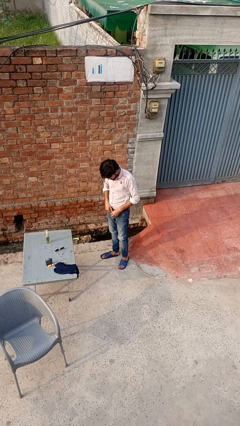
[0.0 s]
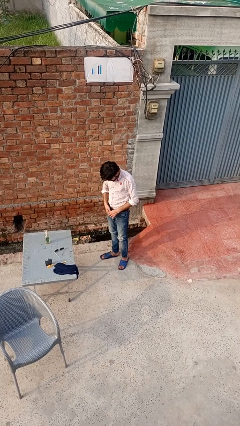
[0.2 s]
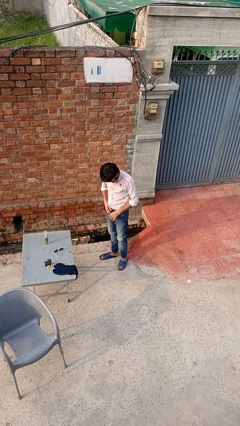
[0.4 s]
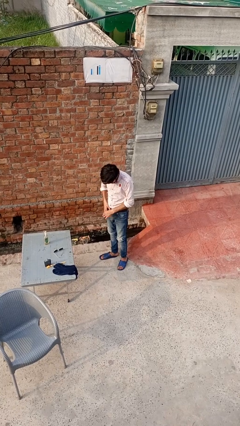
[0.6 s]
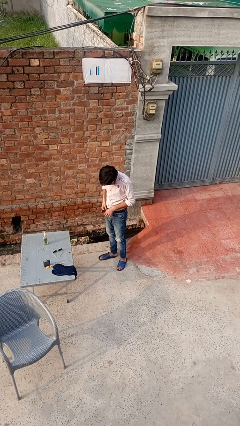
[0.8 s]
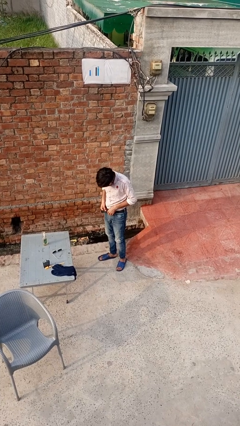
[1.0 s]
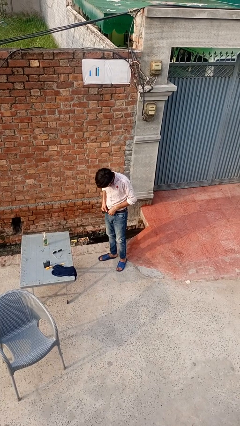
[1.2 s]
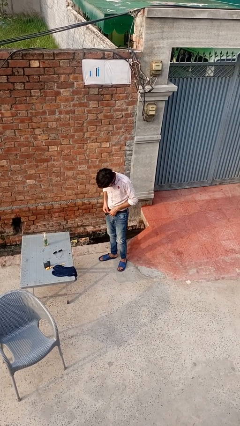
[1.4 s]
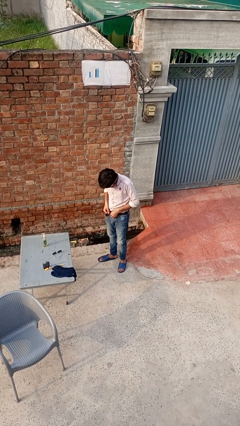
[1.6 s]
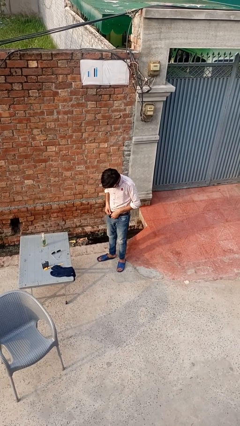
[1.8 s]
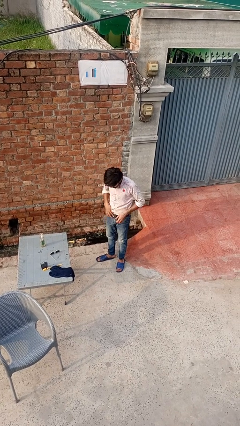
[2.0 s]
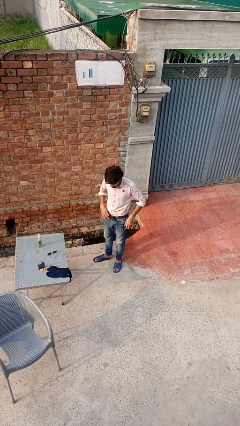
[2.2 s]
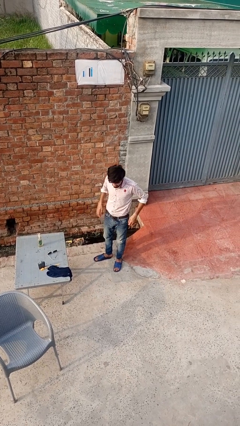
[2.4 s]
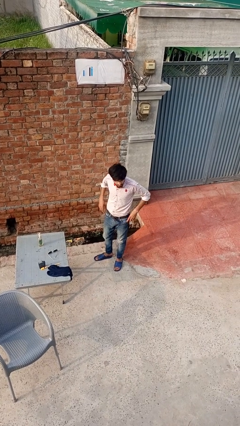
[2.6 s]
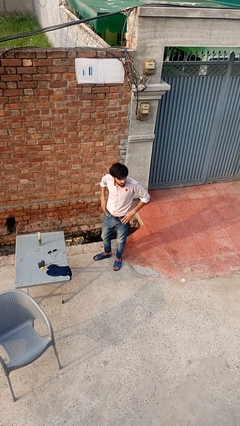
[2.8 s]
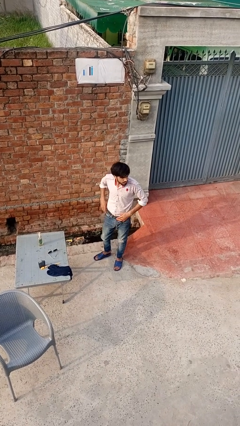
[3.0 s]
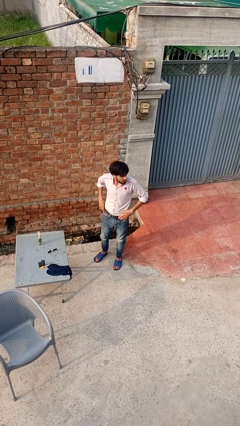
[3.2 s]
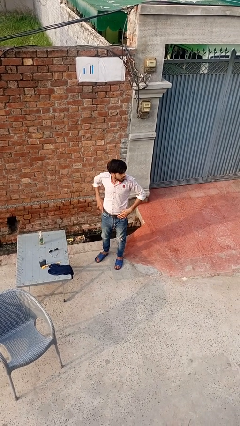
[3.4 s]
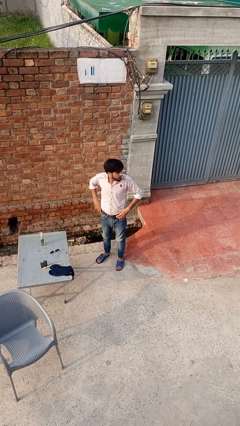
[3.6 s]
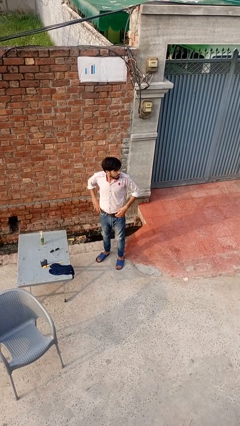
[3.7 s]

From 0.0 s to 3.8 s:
person puts on belt

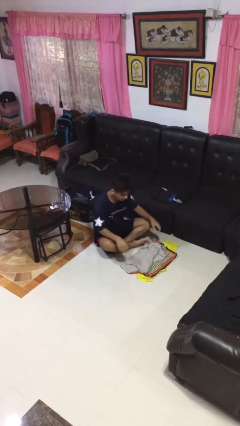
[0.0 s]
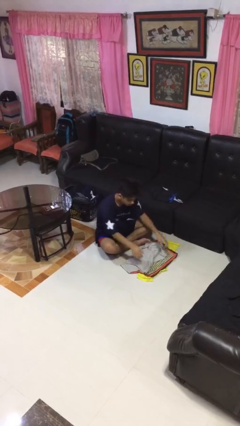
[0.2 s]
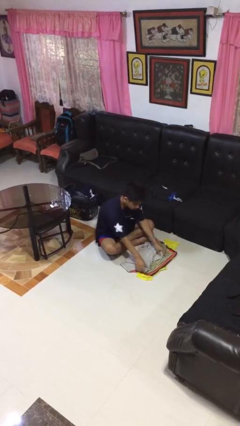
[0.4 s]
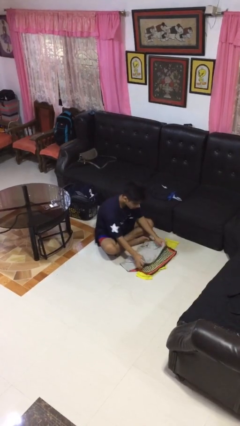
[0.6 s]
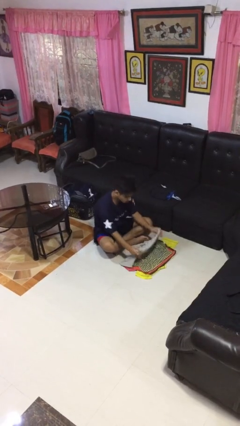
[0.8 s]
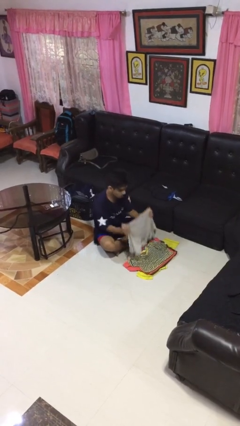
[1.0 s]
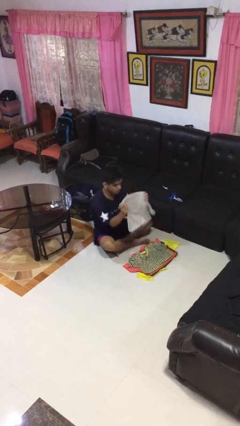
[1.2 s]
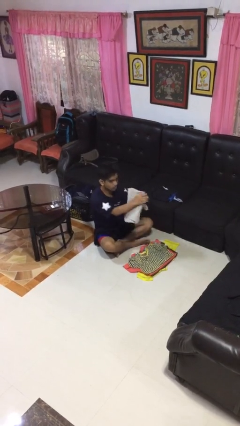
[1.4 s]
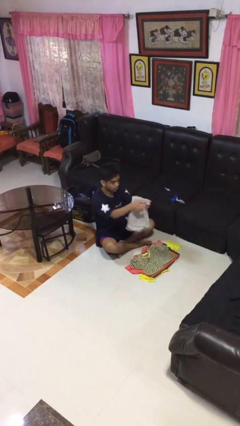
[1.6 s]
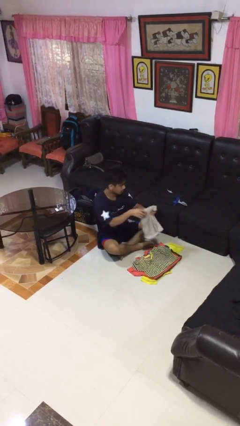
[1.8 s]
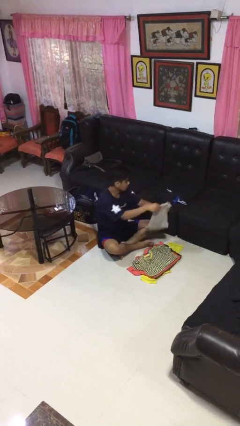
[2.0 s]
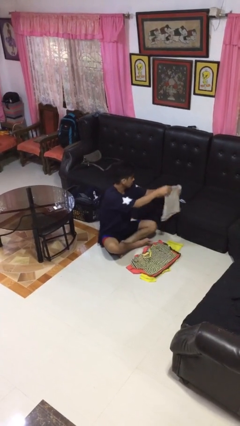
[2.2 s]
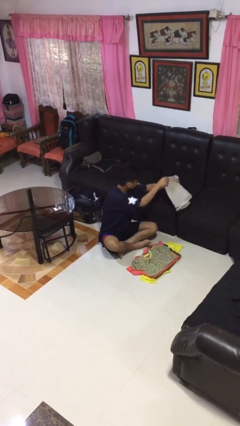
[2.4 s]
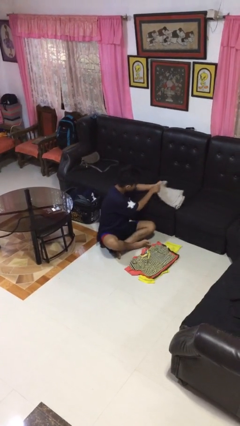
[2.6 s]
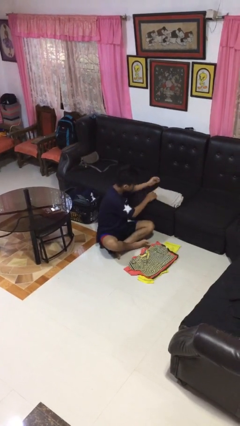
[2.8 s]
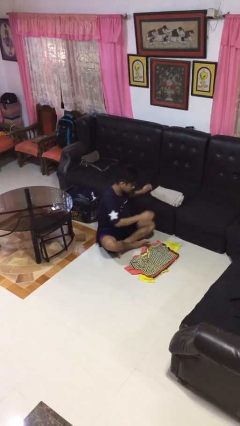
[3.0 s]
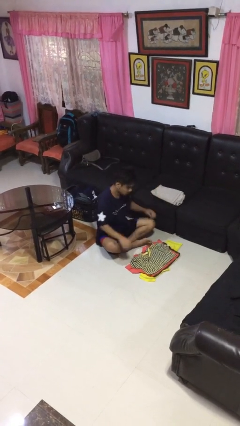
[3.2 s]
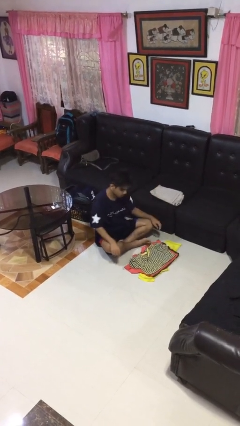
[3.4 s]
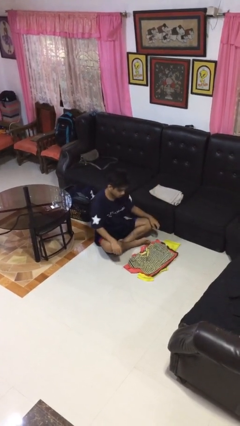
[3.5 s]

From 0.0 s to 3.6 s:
person folds shirt

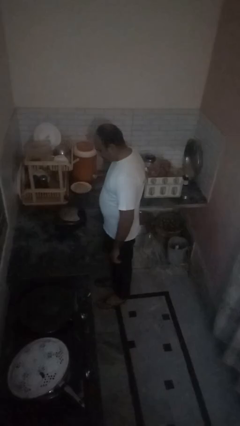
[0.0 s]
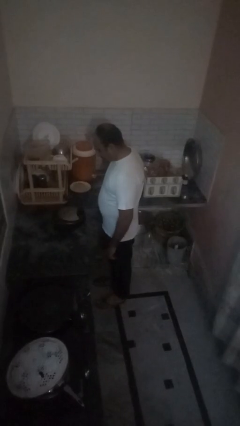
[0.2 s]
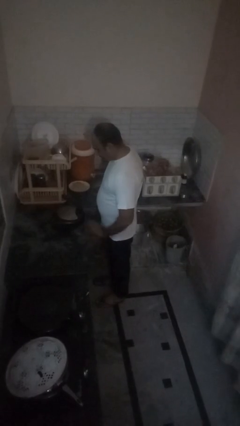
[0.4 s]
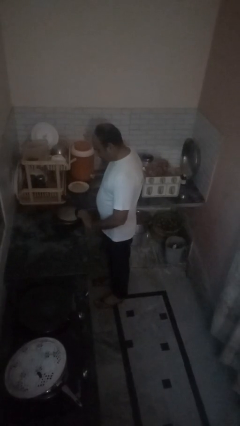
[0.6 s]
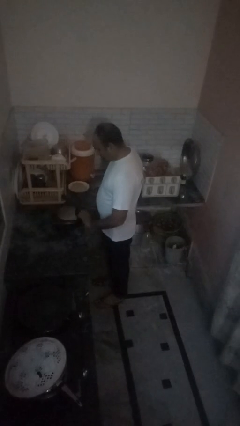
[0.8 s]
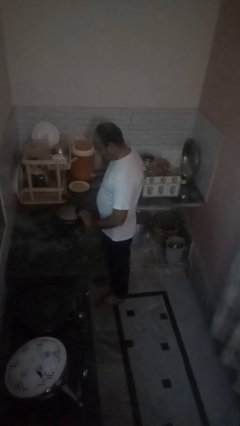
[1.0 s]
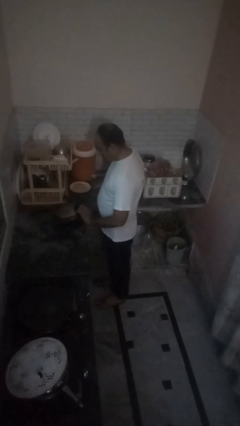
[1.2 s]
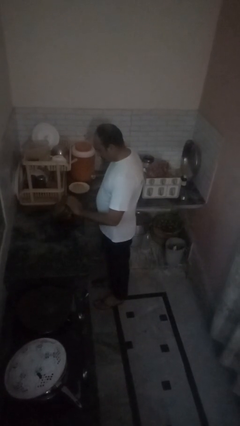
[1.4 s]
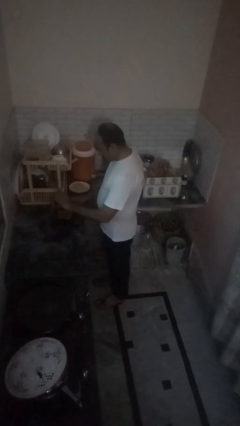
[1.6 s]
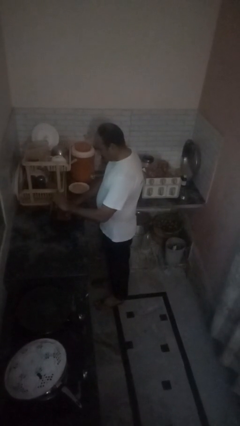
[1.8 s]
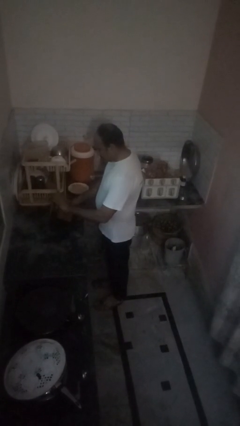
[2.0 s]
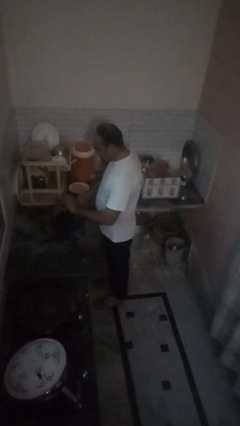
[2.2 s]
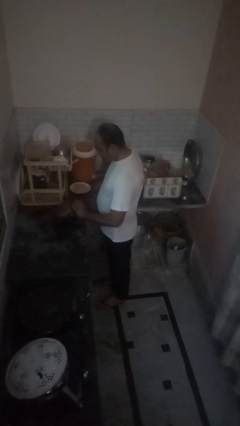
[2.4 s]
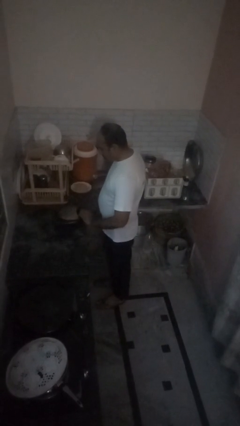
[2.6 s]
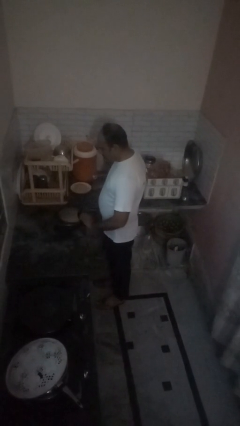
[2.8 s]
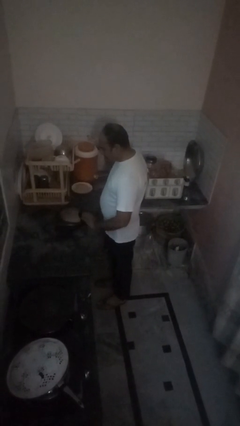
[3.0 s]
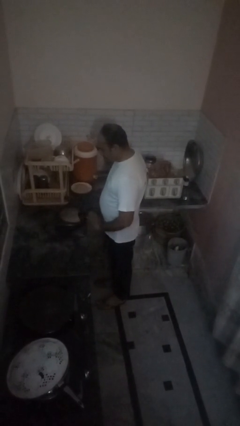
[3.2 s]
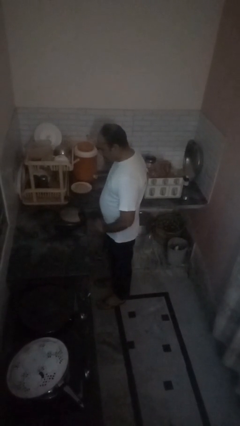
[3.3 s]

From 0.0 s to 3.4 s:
person takes object from toaster

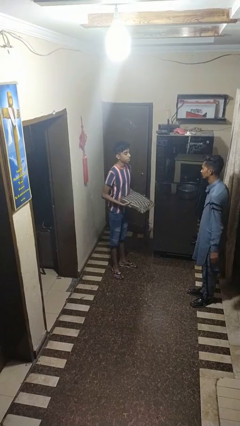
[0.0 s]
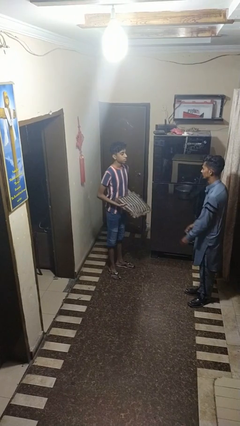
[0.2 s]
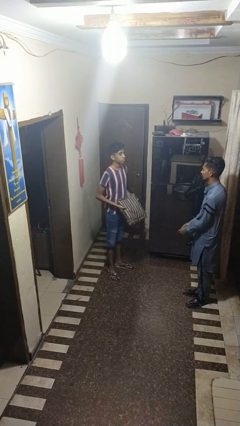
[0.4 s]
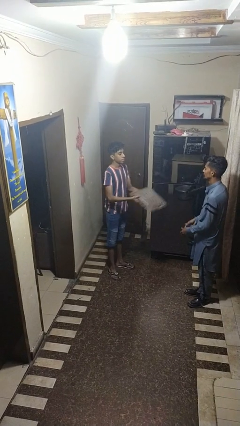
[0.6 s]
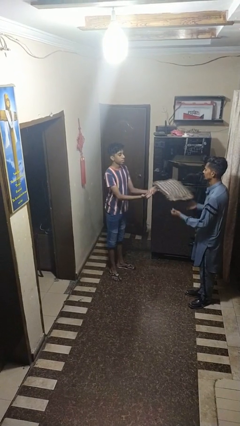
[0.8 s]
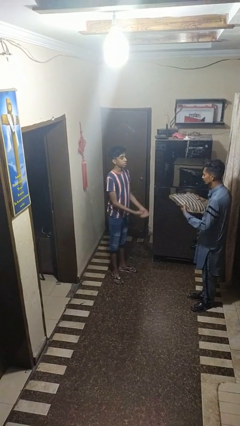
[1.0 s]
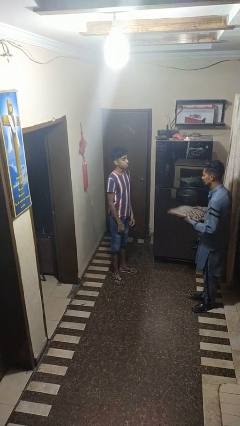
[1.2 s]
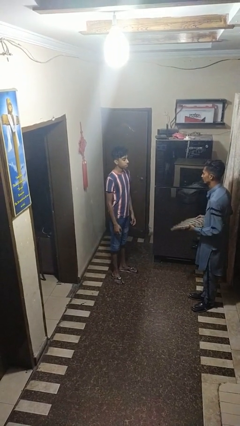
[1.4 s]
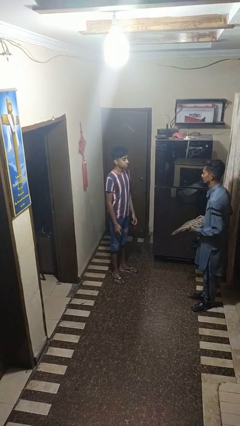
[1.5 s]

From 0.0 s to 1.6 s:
person throws object to person

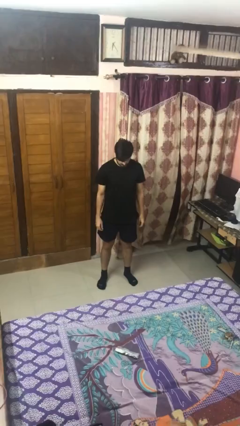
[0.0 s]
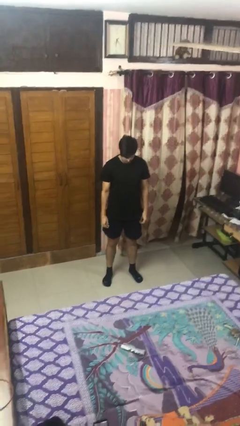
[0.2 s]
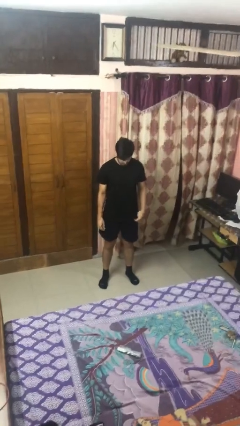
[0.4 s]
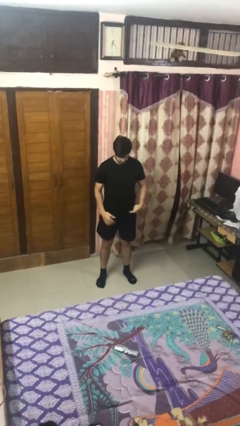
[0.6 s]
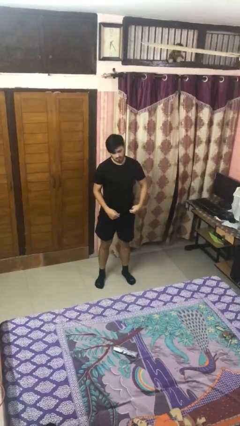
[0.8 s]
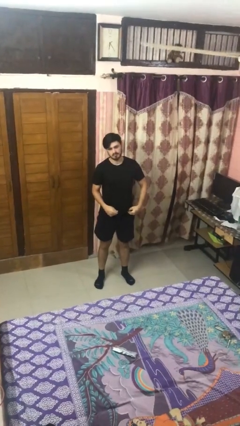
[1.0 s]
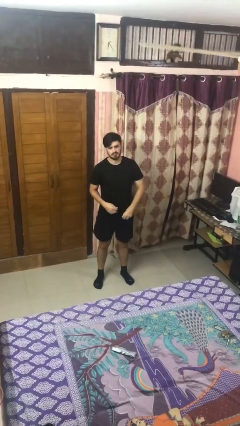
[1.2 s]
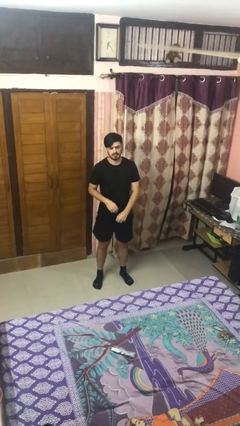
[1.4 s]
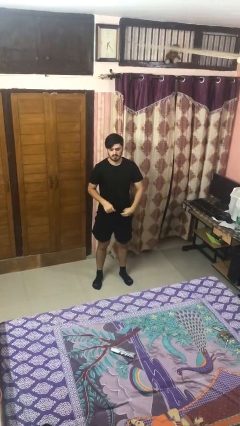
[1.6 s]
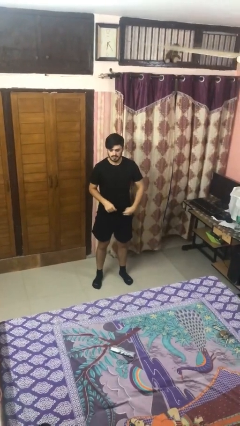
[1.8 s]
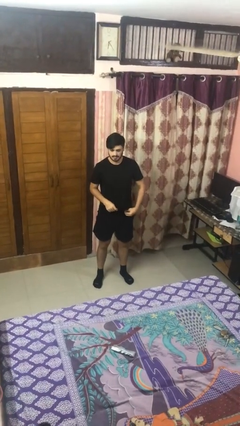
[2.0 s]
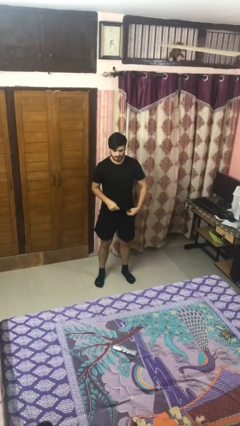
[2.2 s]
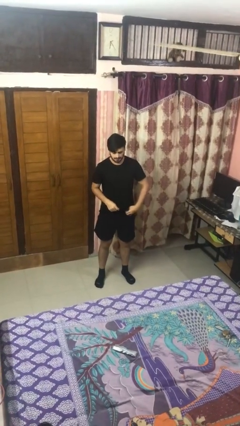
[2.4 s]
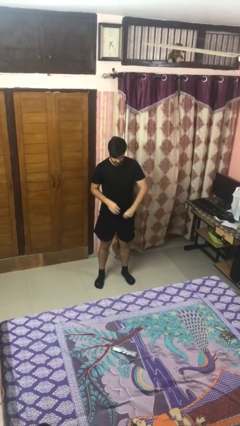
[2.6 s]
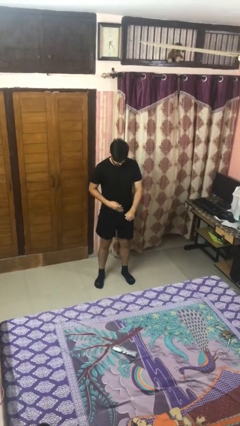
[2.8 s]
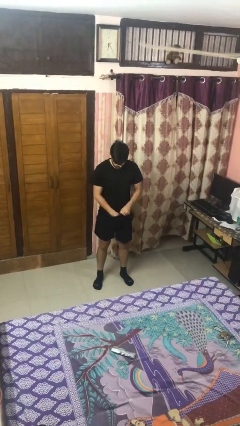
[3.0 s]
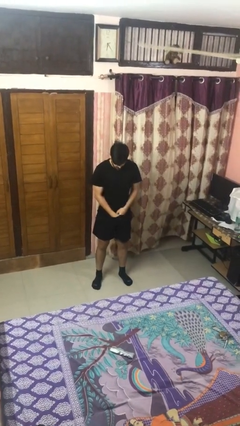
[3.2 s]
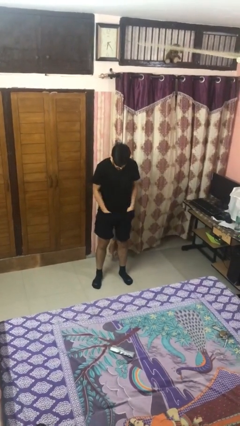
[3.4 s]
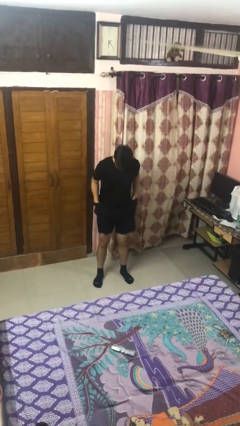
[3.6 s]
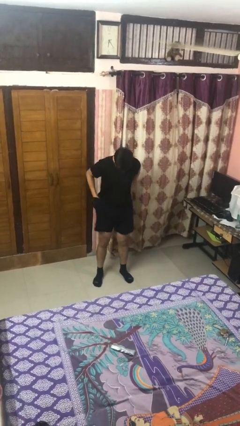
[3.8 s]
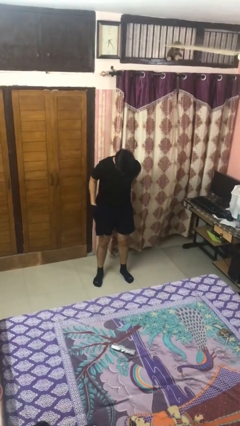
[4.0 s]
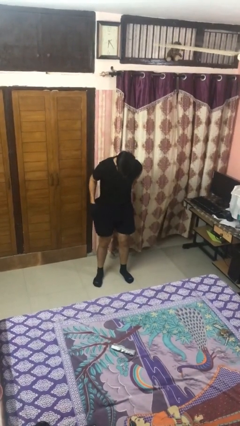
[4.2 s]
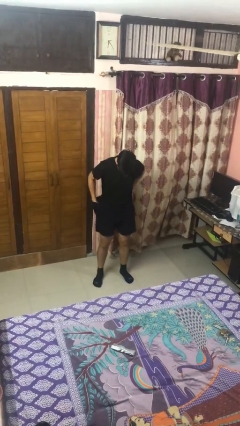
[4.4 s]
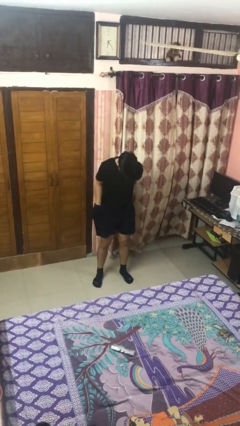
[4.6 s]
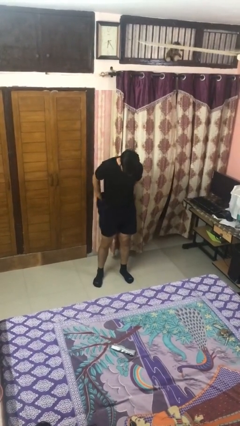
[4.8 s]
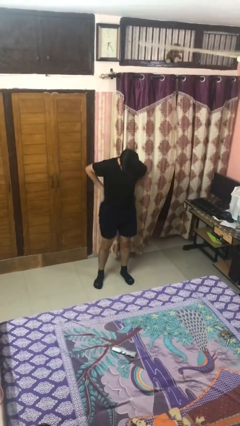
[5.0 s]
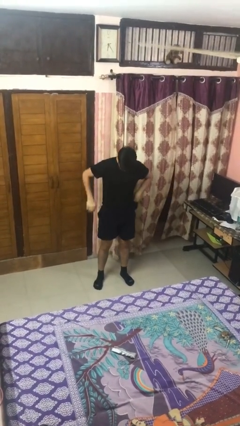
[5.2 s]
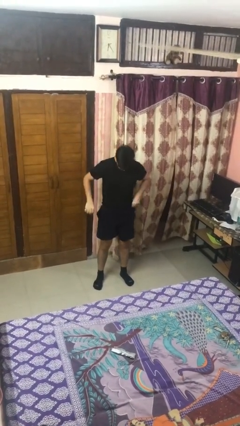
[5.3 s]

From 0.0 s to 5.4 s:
person tucks in shirt
